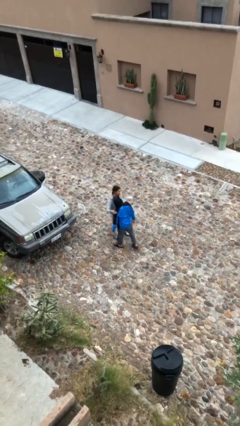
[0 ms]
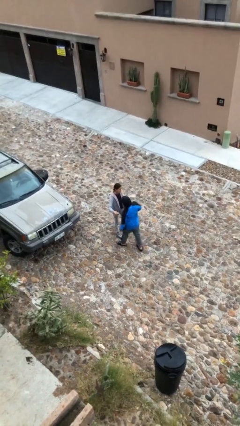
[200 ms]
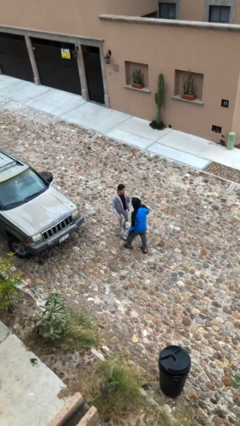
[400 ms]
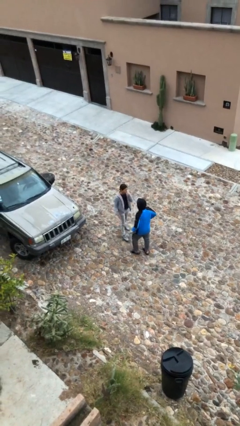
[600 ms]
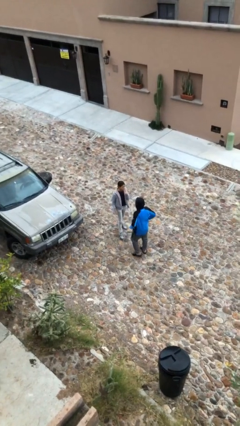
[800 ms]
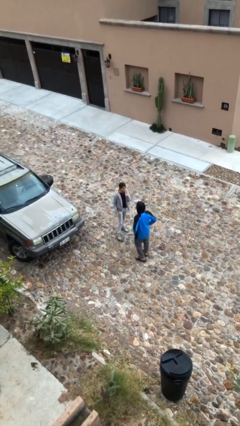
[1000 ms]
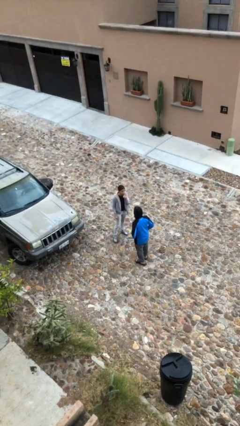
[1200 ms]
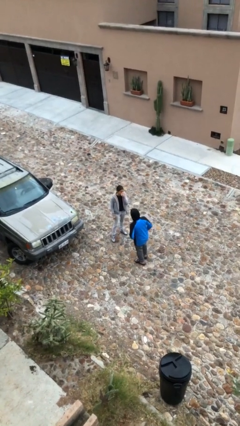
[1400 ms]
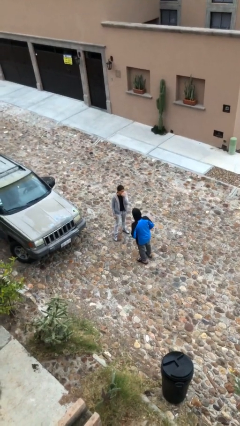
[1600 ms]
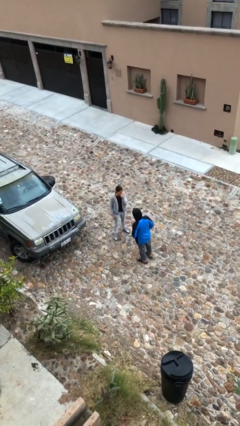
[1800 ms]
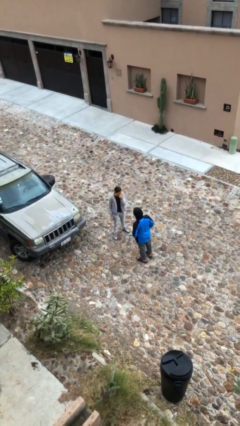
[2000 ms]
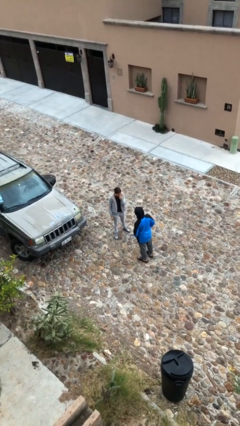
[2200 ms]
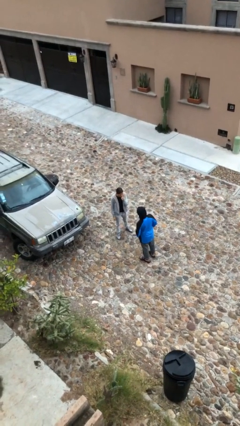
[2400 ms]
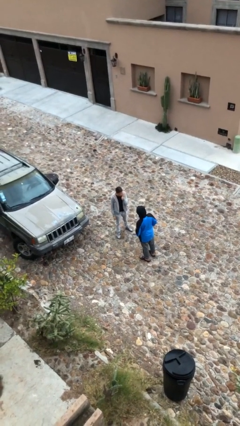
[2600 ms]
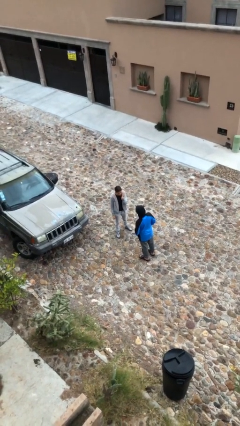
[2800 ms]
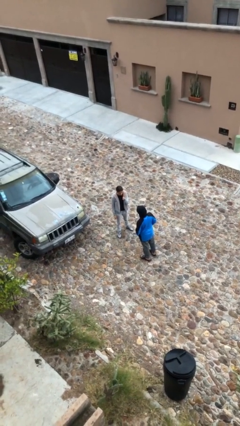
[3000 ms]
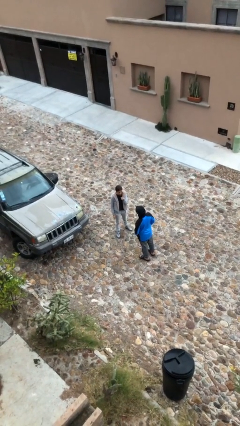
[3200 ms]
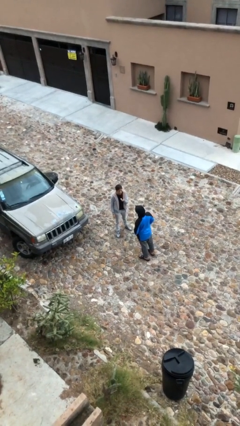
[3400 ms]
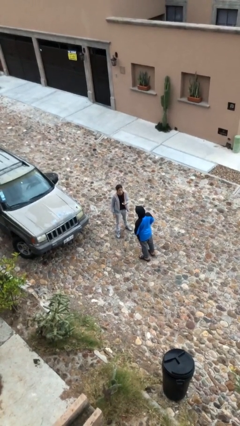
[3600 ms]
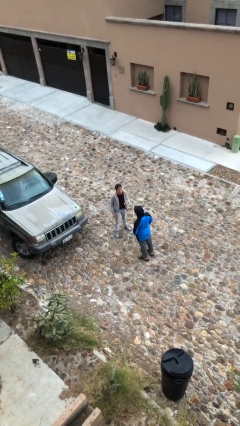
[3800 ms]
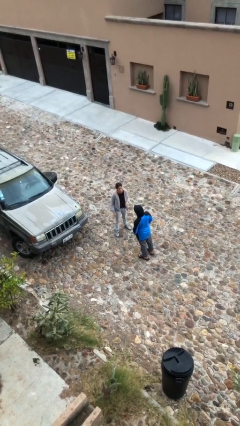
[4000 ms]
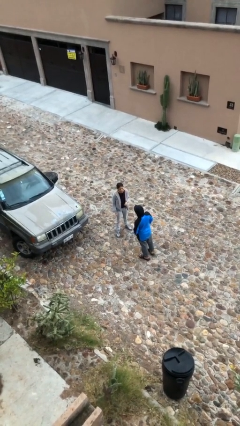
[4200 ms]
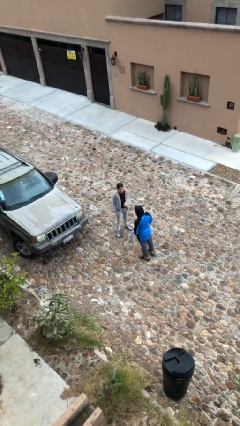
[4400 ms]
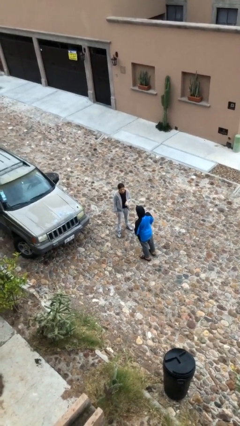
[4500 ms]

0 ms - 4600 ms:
person talks to person

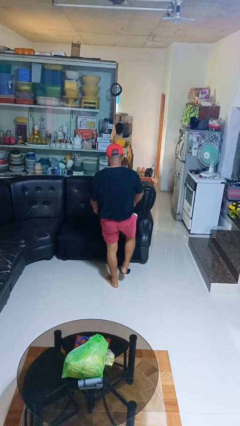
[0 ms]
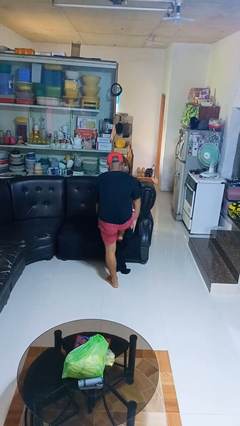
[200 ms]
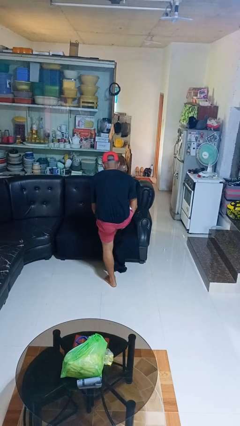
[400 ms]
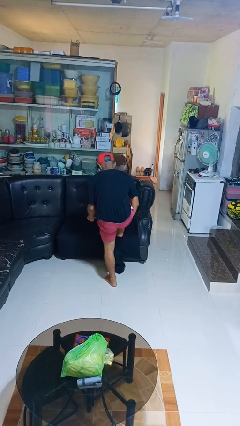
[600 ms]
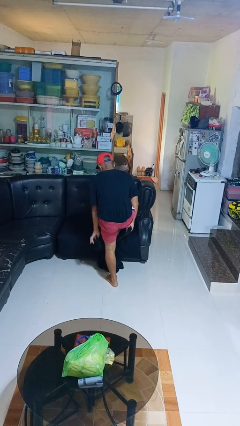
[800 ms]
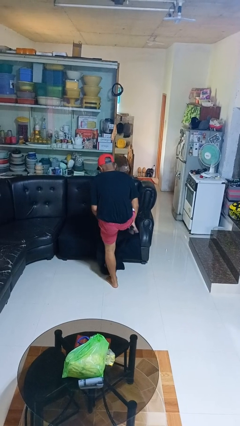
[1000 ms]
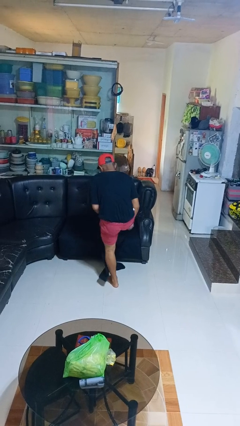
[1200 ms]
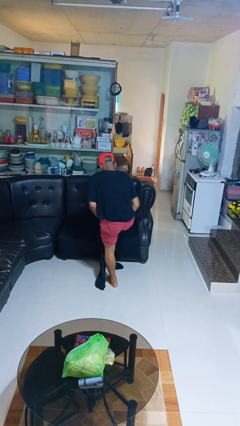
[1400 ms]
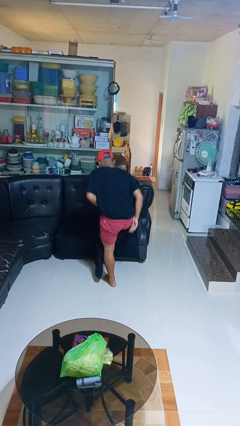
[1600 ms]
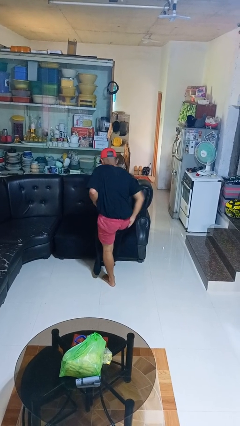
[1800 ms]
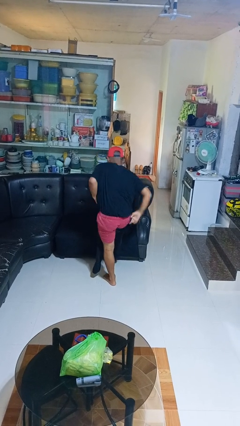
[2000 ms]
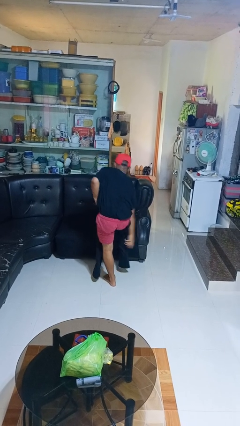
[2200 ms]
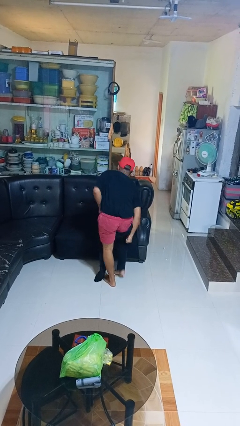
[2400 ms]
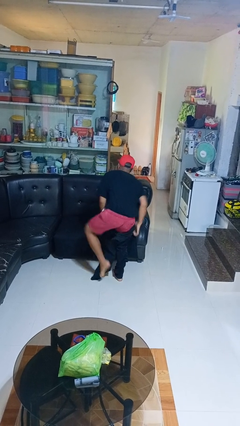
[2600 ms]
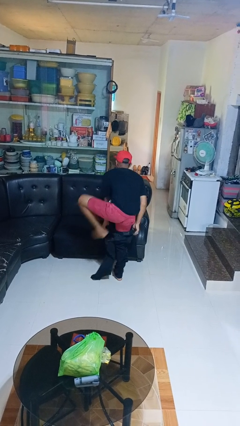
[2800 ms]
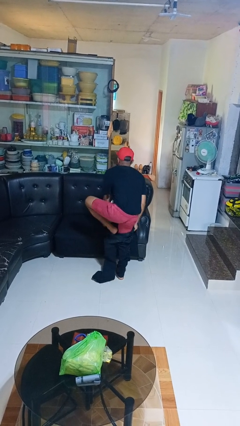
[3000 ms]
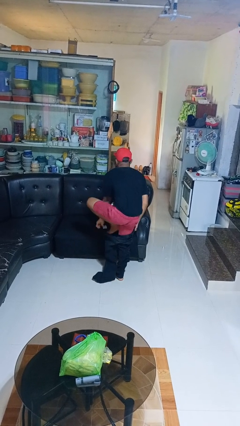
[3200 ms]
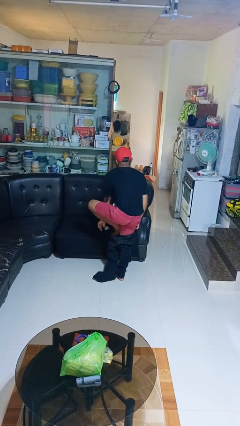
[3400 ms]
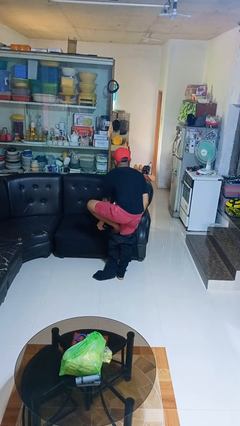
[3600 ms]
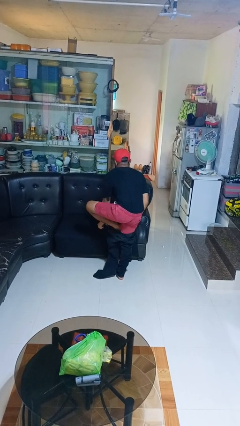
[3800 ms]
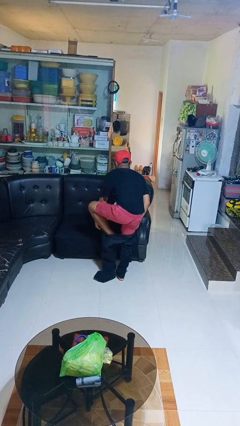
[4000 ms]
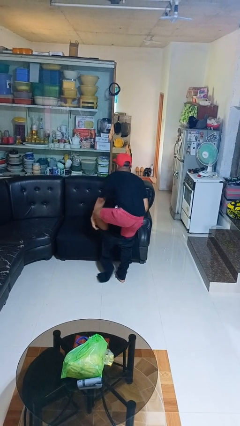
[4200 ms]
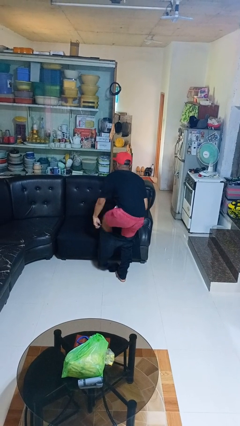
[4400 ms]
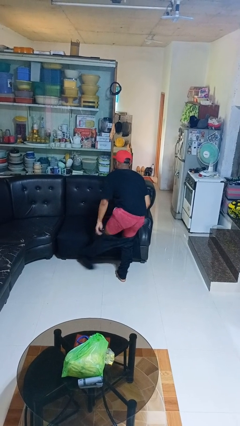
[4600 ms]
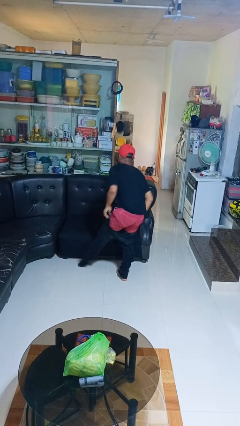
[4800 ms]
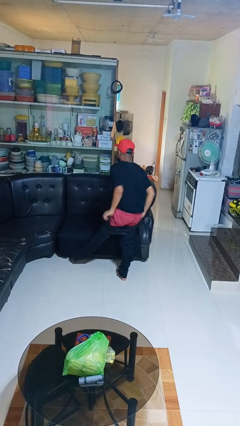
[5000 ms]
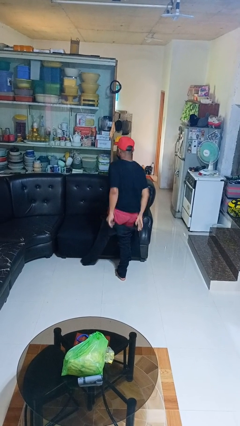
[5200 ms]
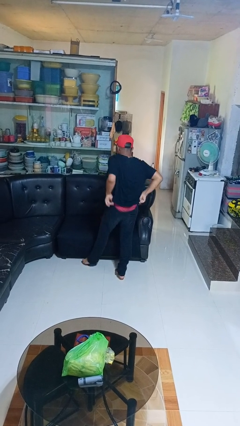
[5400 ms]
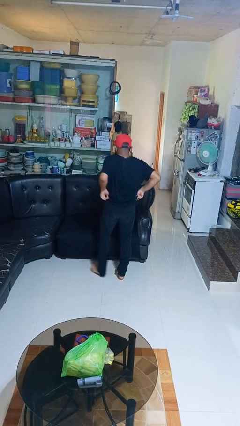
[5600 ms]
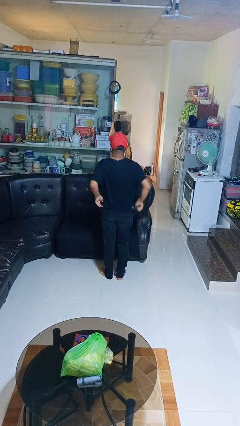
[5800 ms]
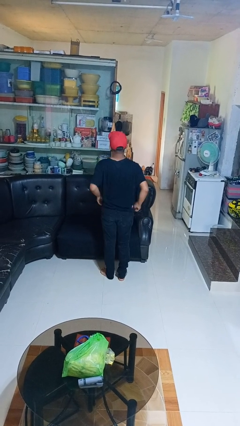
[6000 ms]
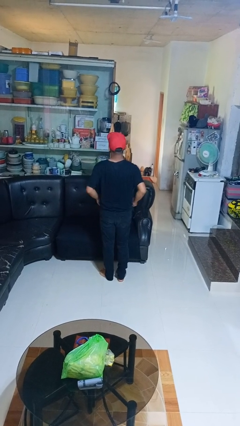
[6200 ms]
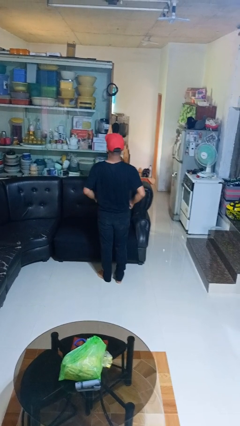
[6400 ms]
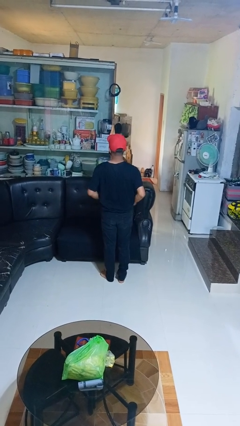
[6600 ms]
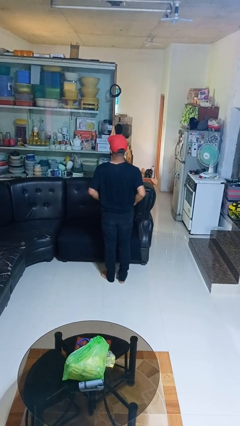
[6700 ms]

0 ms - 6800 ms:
person puts on pants

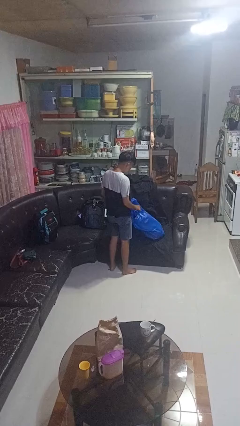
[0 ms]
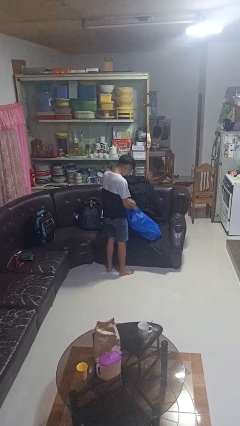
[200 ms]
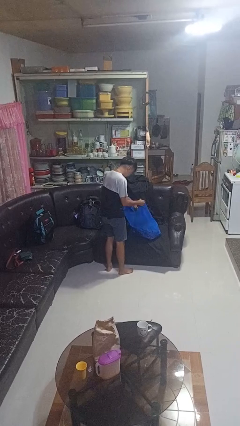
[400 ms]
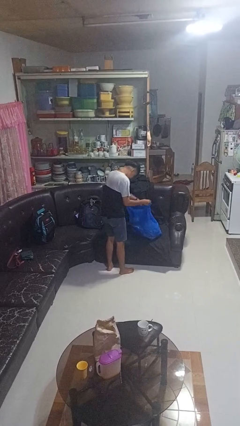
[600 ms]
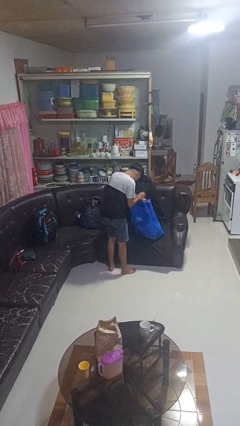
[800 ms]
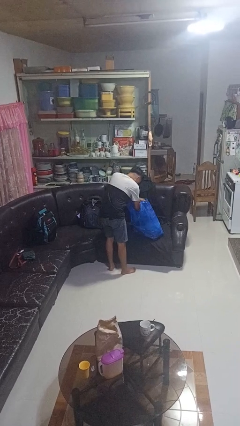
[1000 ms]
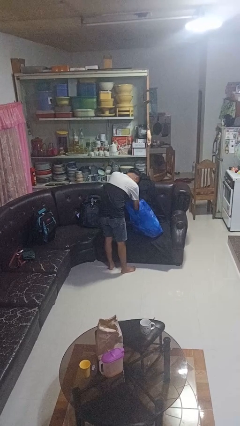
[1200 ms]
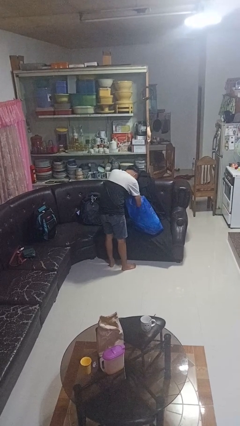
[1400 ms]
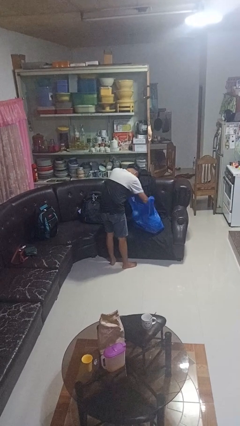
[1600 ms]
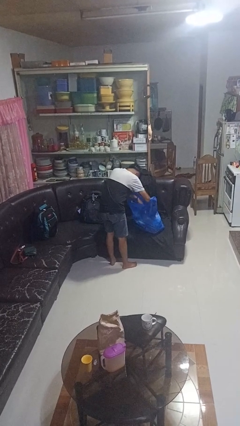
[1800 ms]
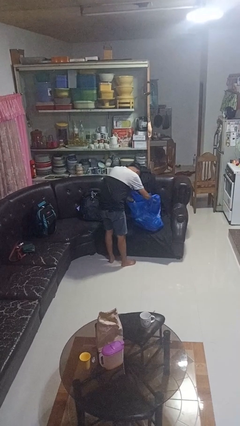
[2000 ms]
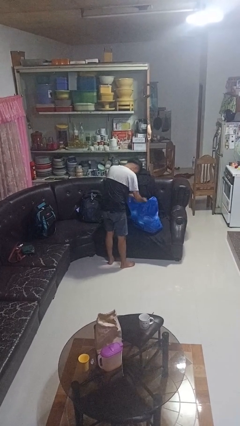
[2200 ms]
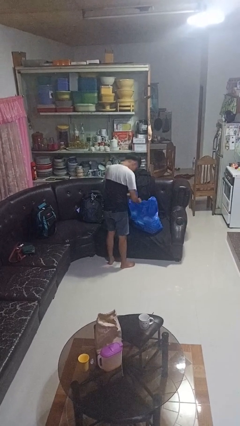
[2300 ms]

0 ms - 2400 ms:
person searches in bag

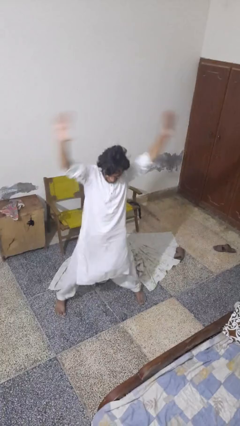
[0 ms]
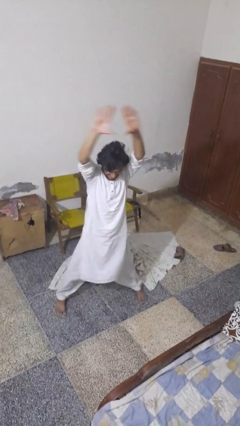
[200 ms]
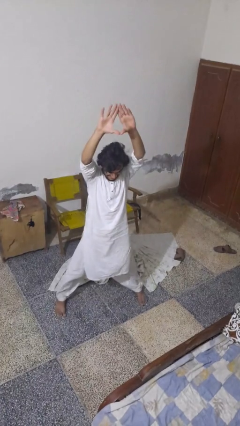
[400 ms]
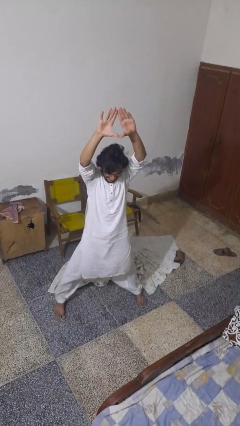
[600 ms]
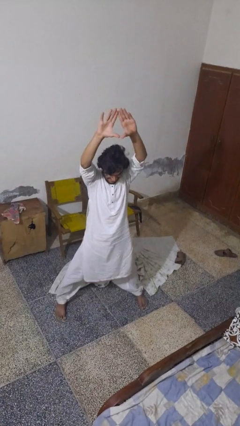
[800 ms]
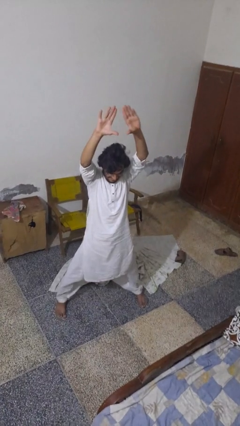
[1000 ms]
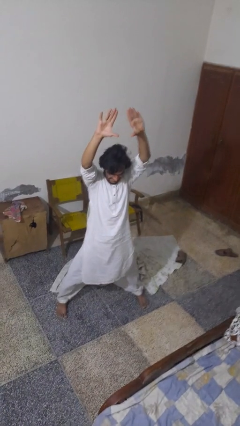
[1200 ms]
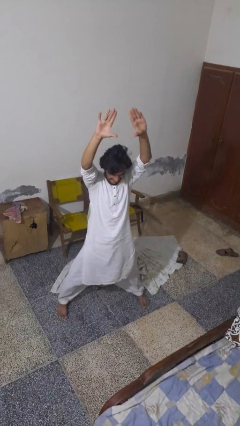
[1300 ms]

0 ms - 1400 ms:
person exercises with jumping jacks

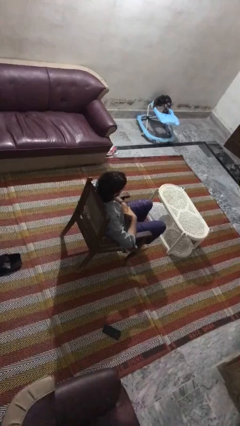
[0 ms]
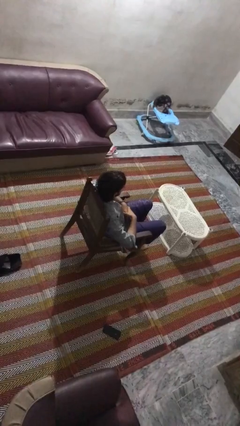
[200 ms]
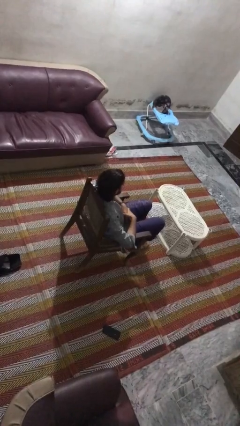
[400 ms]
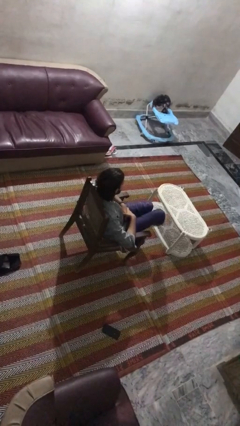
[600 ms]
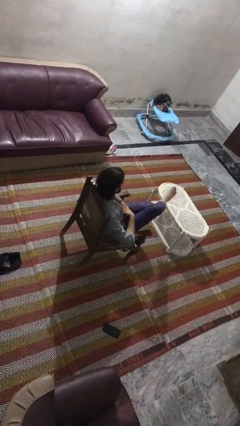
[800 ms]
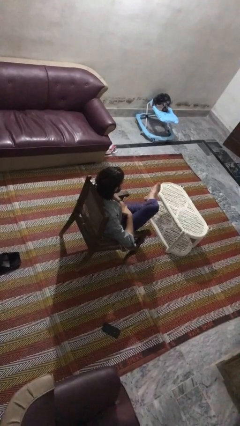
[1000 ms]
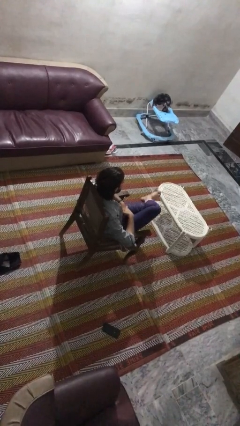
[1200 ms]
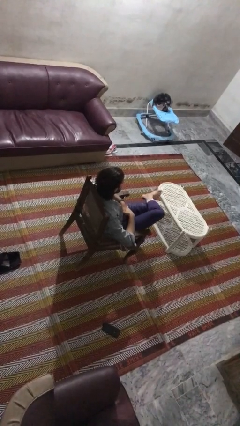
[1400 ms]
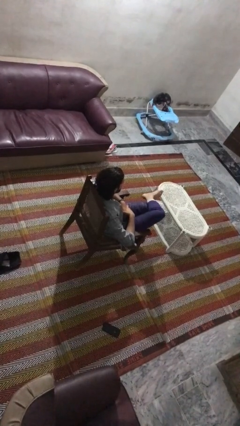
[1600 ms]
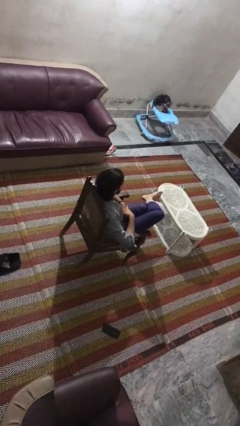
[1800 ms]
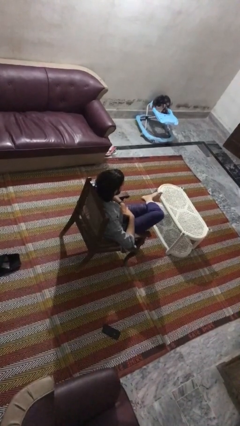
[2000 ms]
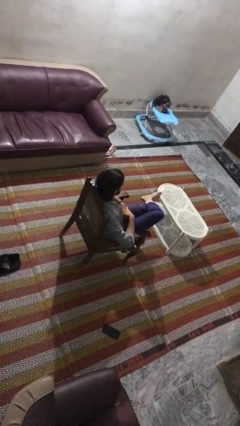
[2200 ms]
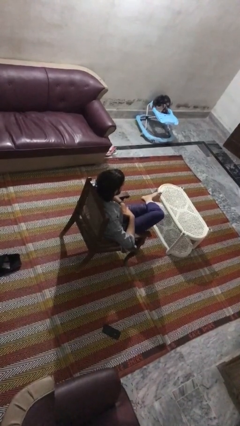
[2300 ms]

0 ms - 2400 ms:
person crosses legs
